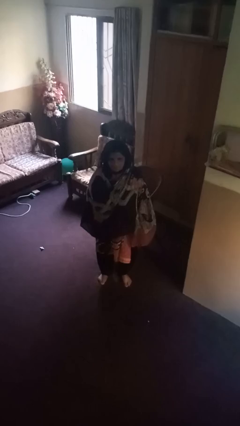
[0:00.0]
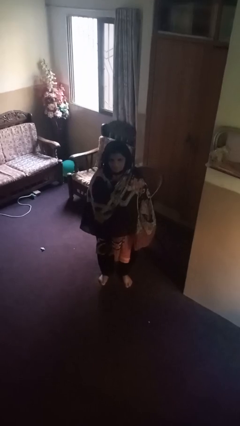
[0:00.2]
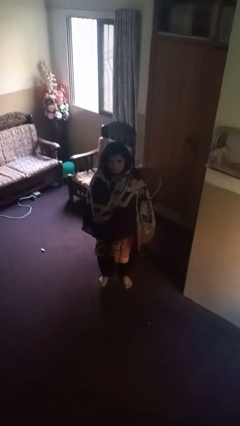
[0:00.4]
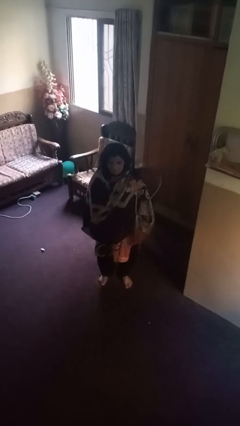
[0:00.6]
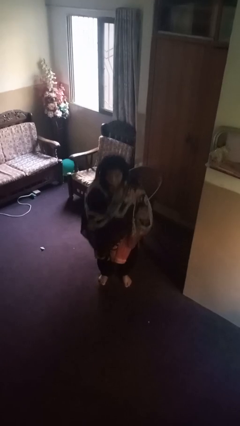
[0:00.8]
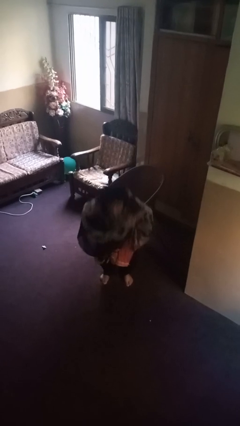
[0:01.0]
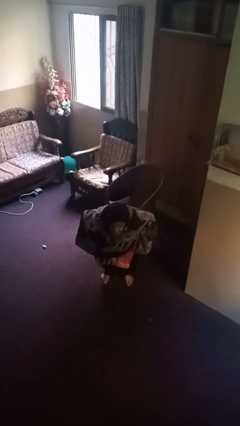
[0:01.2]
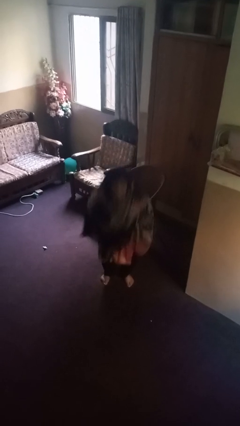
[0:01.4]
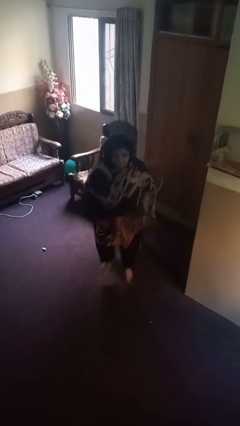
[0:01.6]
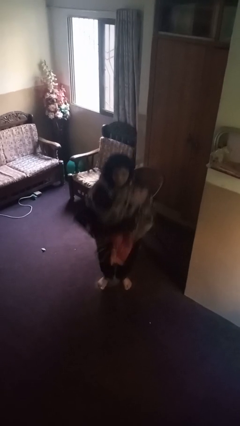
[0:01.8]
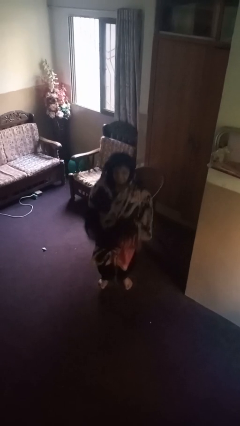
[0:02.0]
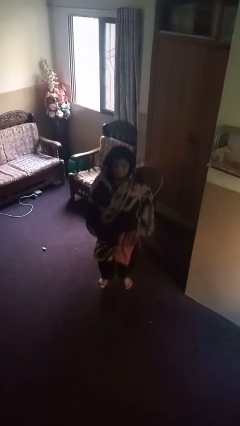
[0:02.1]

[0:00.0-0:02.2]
person jumps

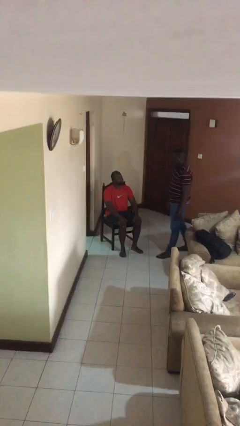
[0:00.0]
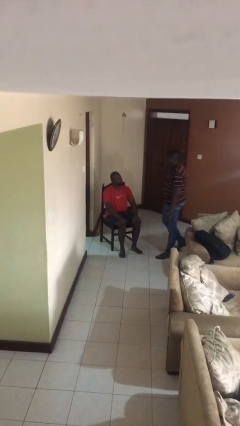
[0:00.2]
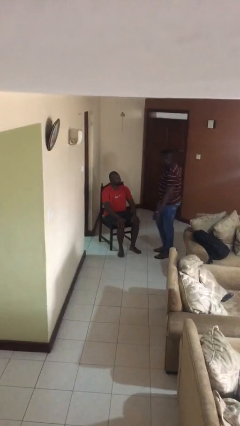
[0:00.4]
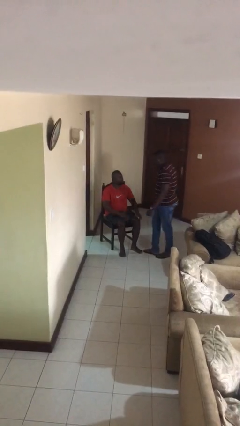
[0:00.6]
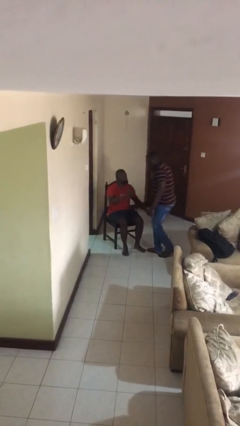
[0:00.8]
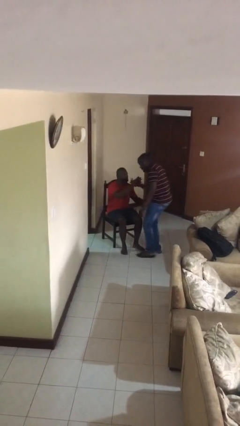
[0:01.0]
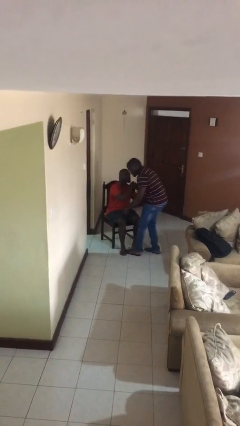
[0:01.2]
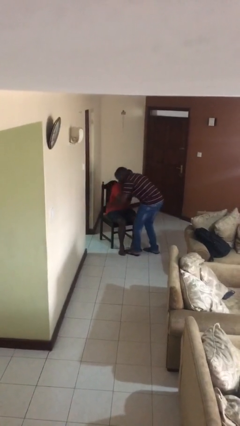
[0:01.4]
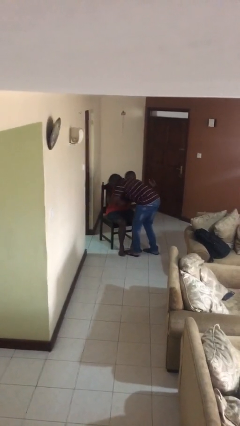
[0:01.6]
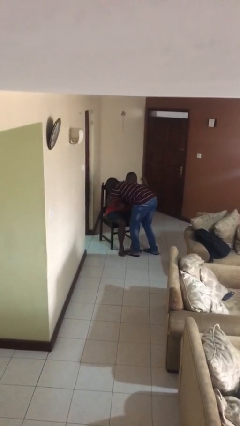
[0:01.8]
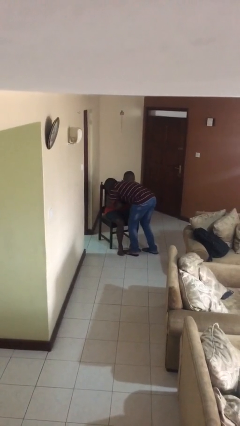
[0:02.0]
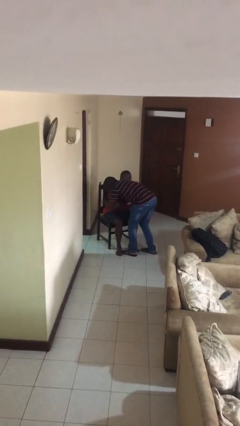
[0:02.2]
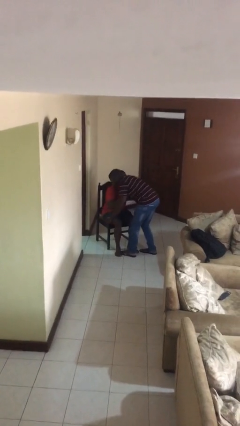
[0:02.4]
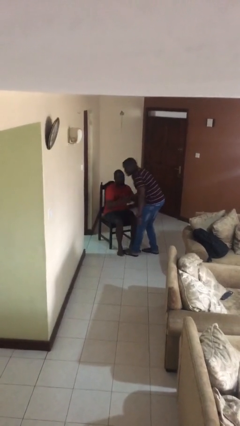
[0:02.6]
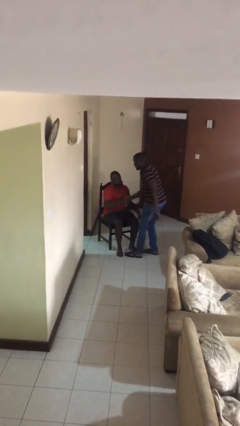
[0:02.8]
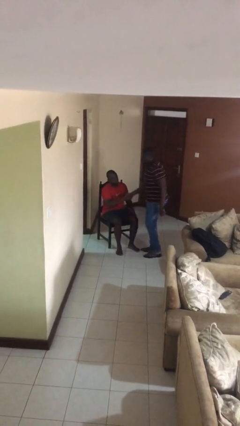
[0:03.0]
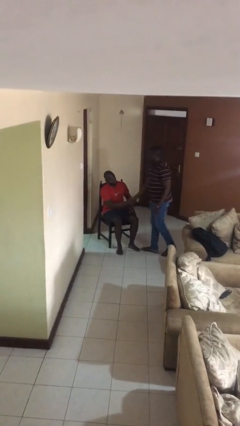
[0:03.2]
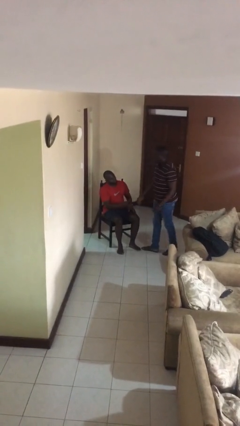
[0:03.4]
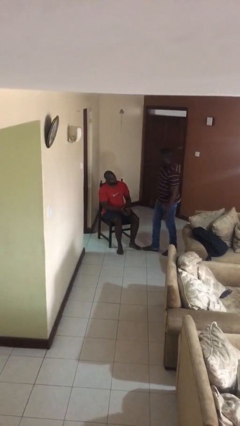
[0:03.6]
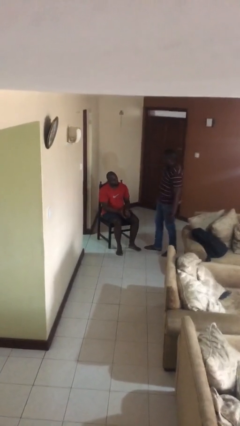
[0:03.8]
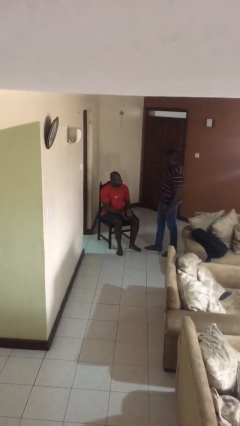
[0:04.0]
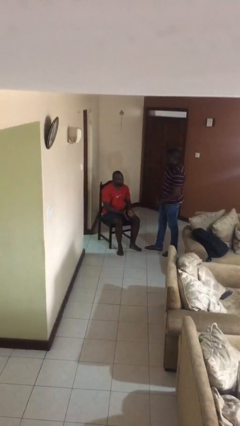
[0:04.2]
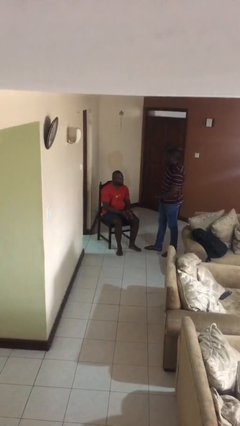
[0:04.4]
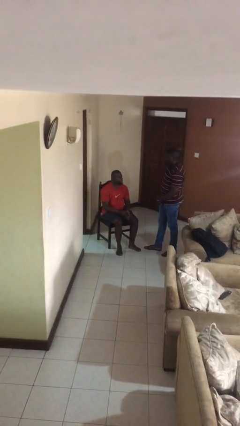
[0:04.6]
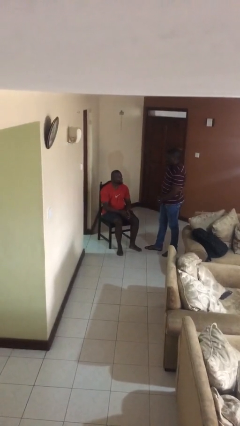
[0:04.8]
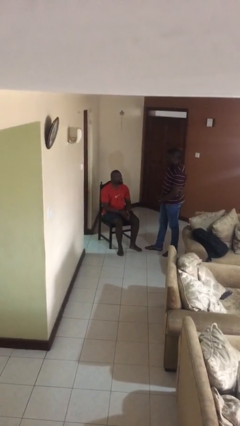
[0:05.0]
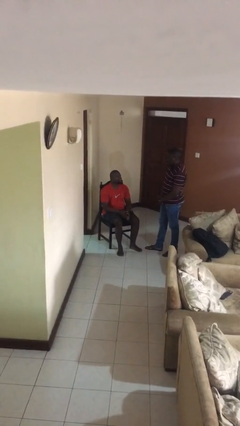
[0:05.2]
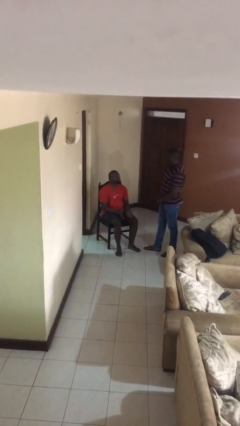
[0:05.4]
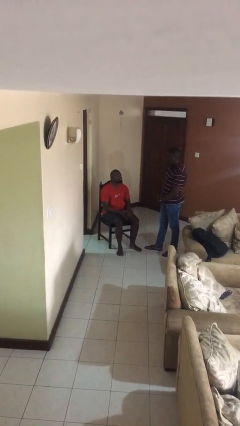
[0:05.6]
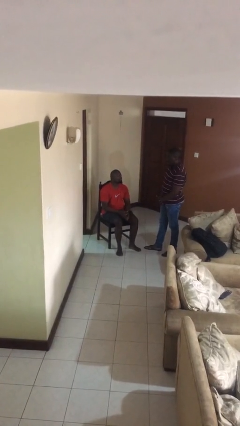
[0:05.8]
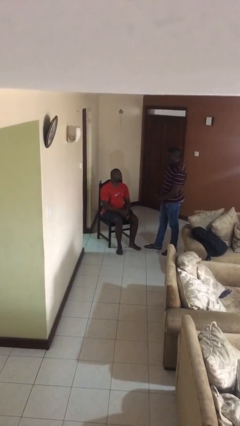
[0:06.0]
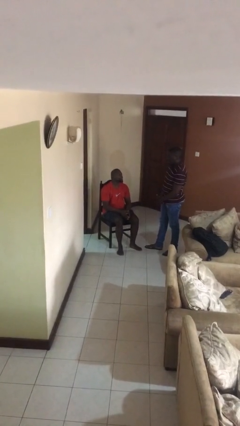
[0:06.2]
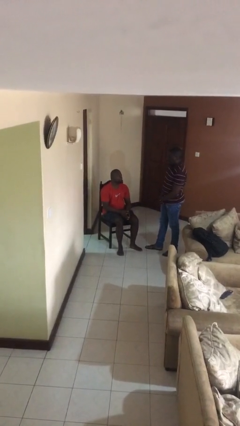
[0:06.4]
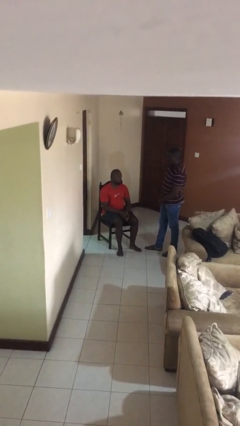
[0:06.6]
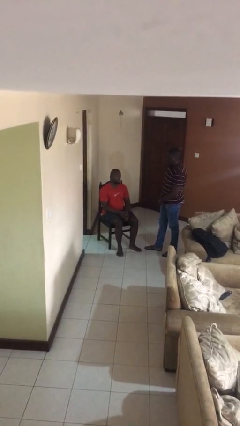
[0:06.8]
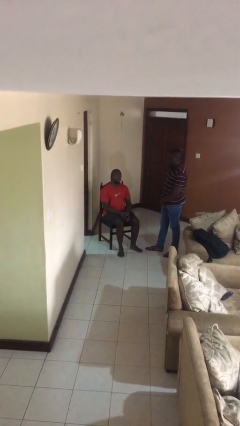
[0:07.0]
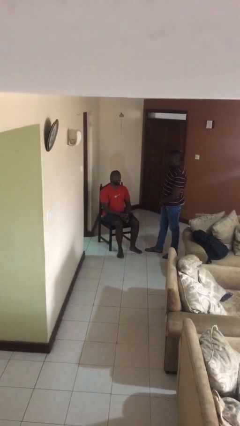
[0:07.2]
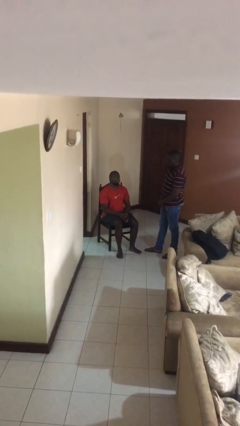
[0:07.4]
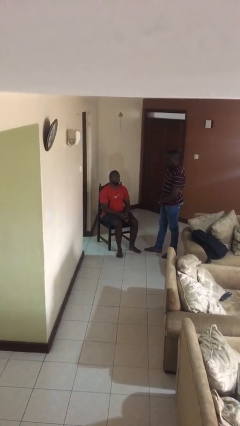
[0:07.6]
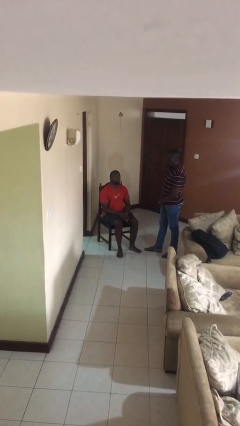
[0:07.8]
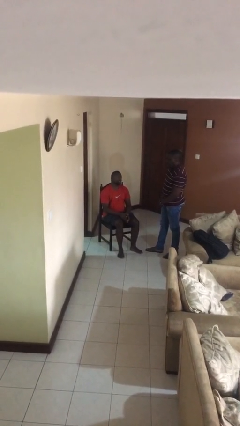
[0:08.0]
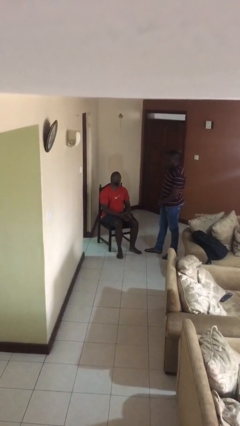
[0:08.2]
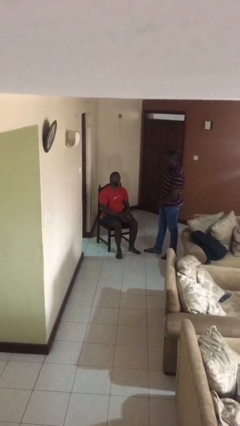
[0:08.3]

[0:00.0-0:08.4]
person embraces person

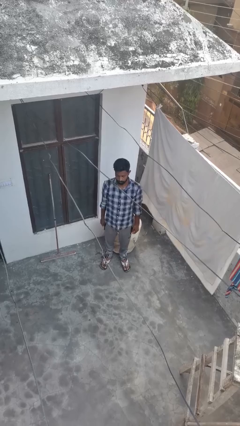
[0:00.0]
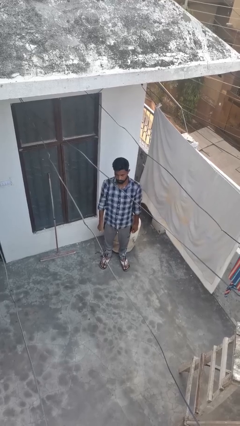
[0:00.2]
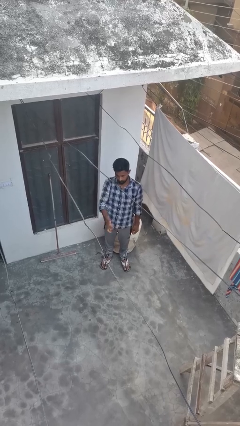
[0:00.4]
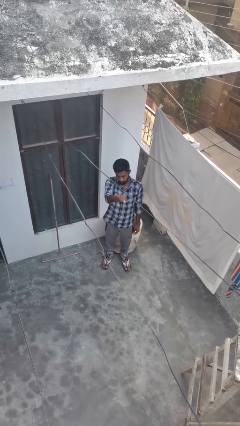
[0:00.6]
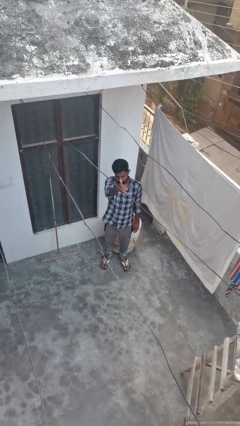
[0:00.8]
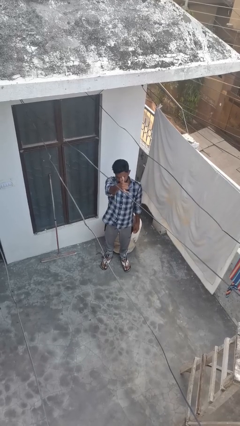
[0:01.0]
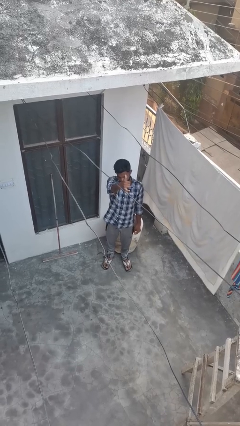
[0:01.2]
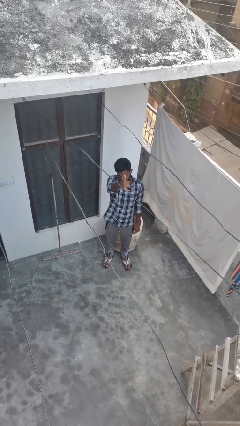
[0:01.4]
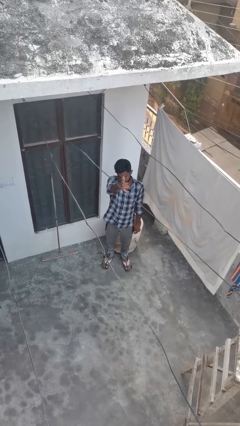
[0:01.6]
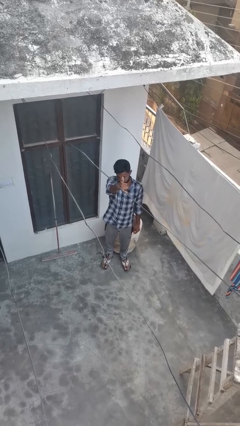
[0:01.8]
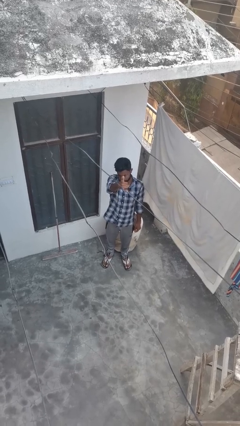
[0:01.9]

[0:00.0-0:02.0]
person gestures hang loose

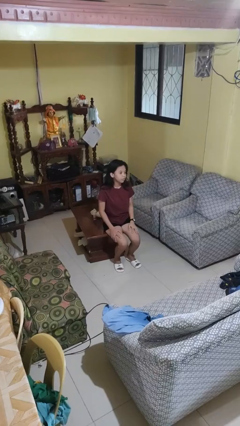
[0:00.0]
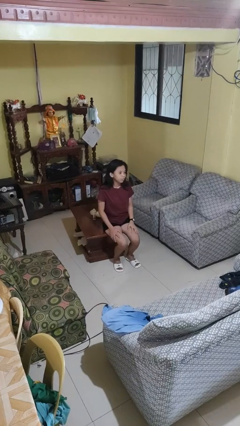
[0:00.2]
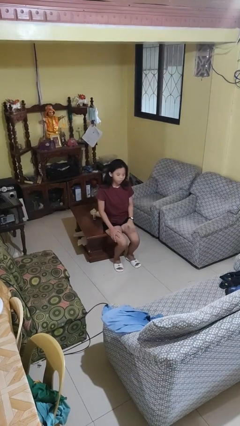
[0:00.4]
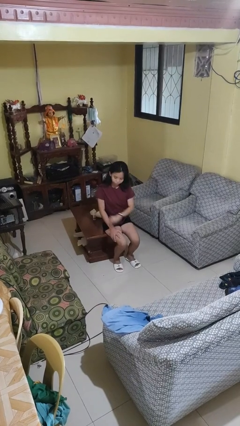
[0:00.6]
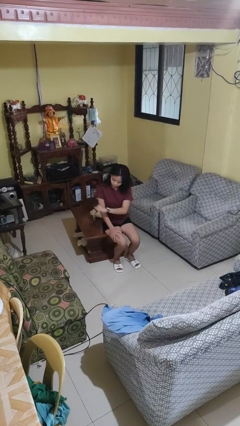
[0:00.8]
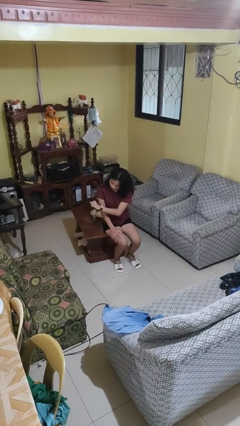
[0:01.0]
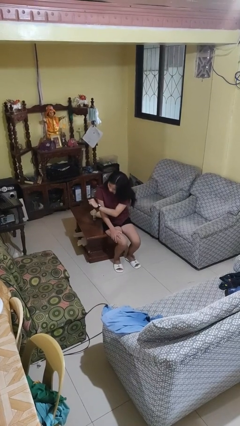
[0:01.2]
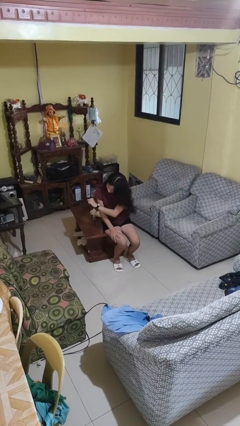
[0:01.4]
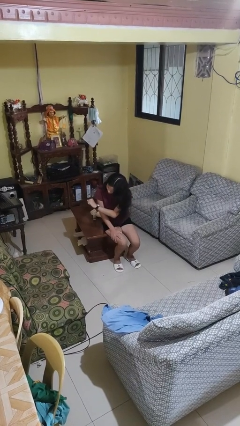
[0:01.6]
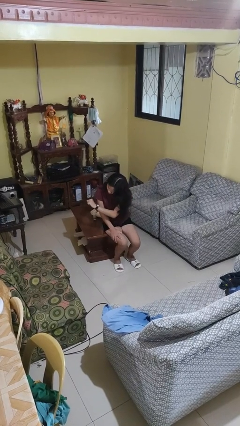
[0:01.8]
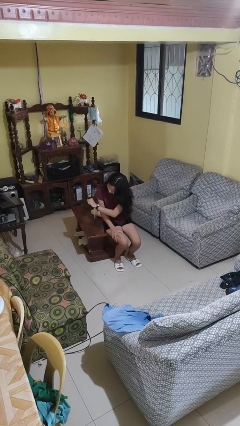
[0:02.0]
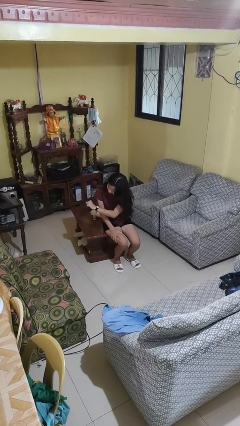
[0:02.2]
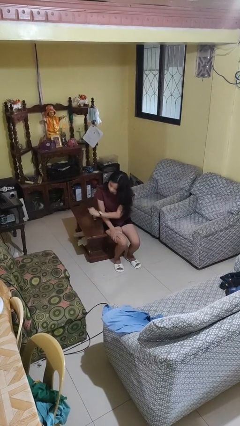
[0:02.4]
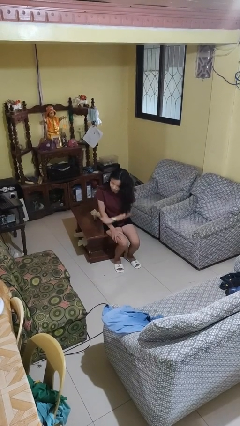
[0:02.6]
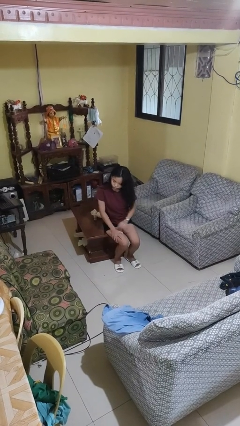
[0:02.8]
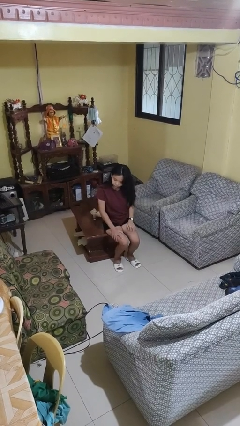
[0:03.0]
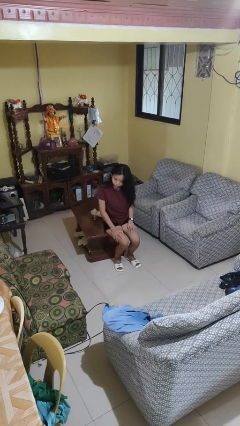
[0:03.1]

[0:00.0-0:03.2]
person looks at wristwatch

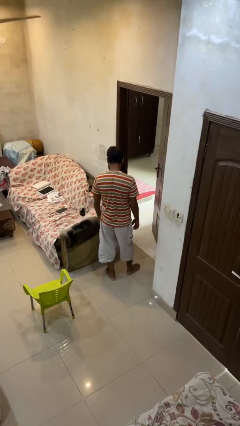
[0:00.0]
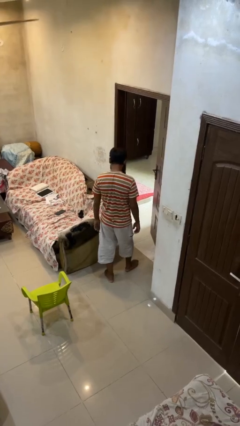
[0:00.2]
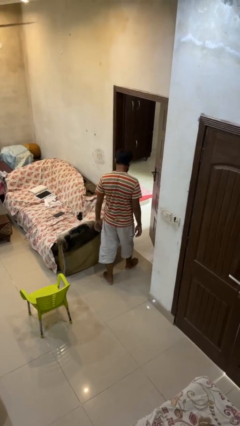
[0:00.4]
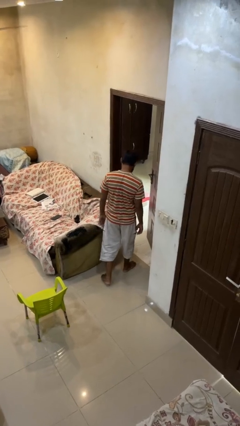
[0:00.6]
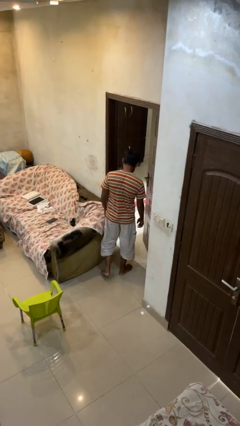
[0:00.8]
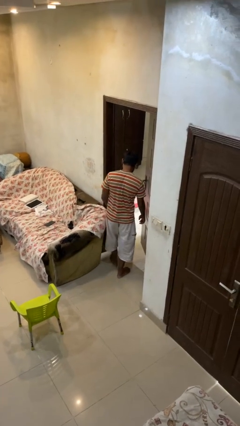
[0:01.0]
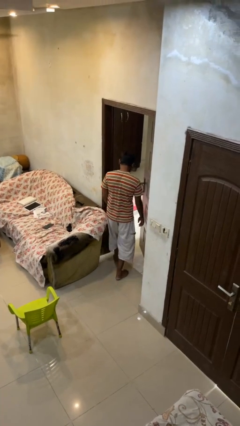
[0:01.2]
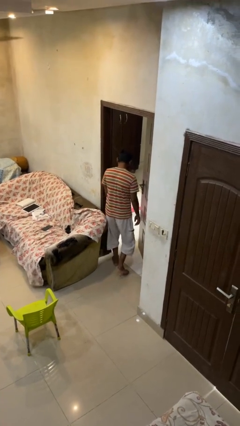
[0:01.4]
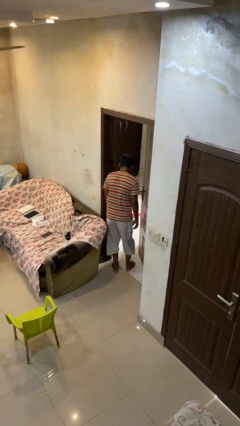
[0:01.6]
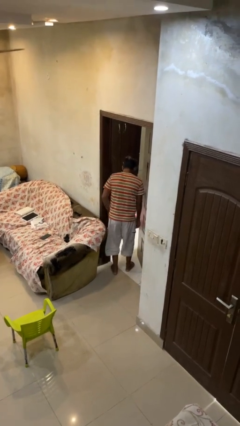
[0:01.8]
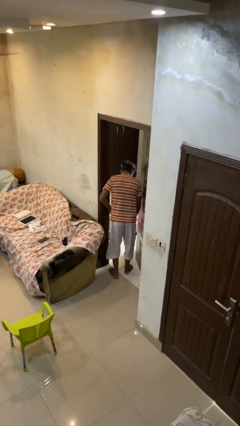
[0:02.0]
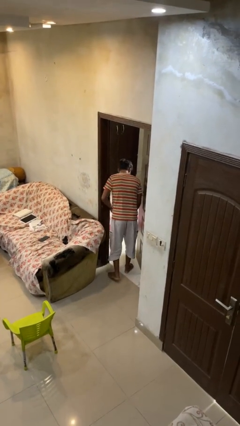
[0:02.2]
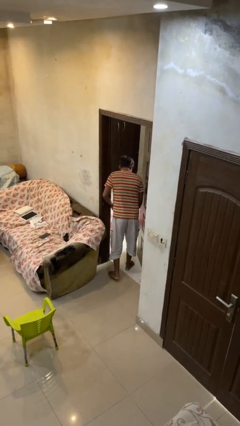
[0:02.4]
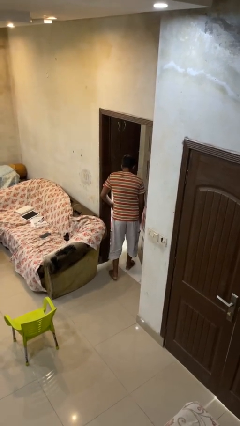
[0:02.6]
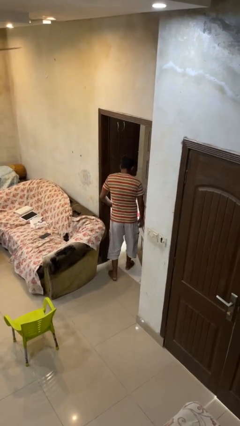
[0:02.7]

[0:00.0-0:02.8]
person bumps into wall
